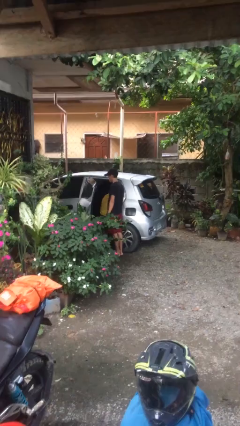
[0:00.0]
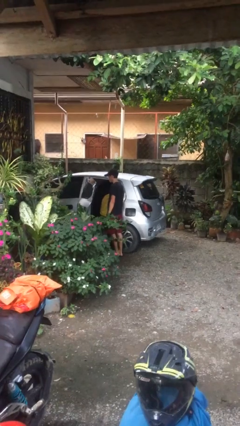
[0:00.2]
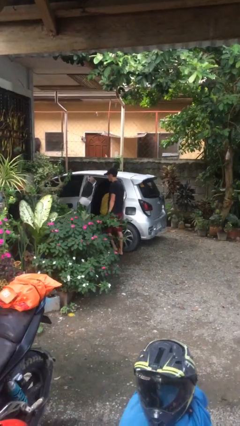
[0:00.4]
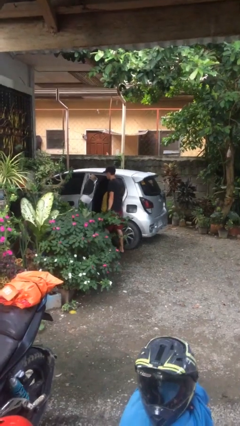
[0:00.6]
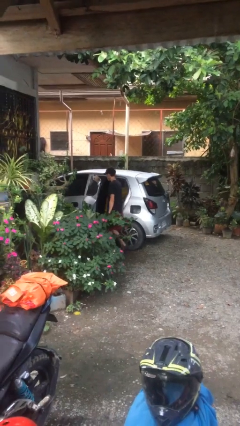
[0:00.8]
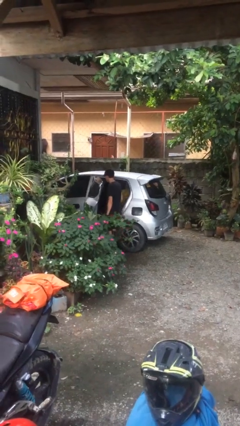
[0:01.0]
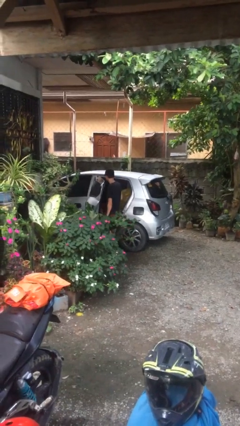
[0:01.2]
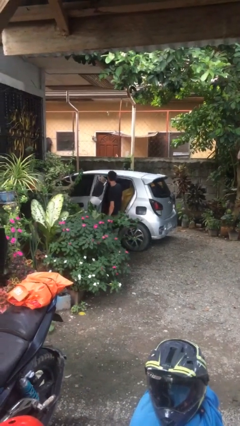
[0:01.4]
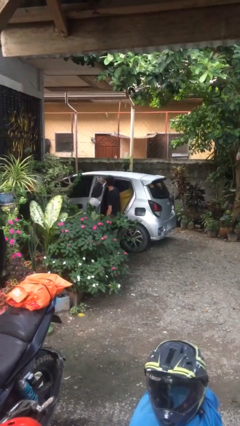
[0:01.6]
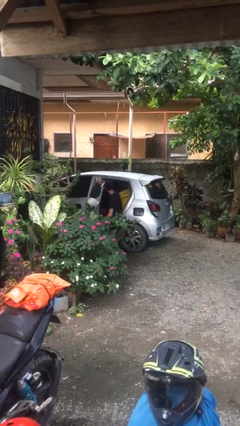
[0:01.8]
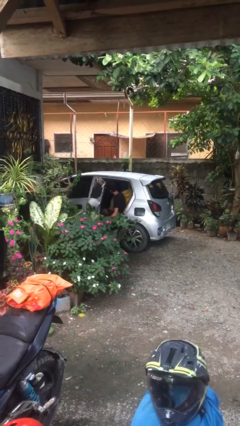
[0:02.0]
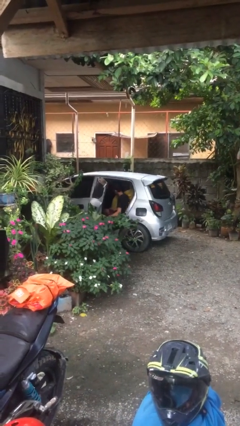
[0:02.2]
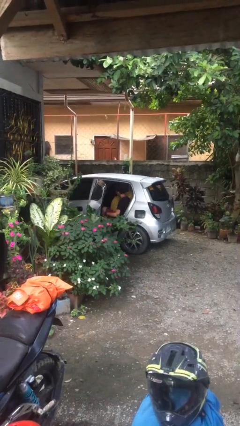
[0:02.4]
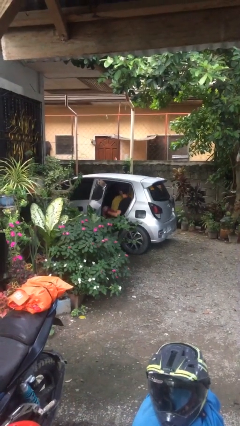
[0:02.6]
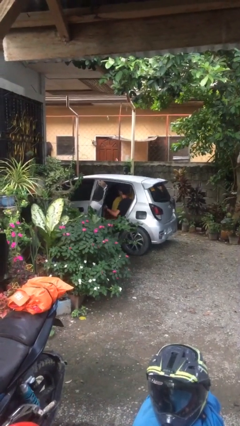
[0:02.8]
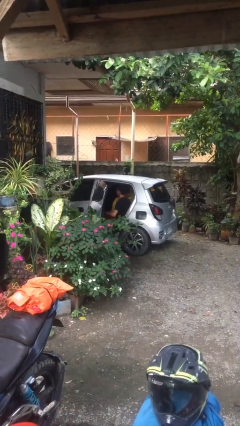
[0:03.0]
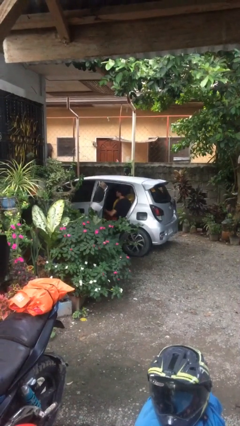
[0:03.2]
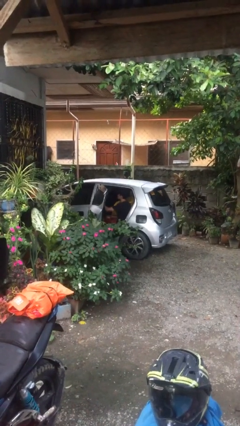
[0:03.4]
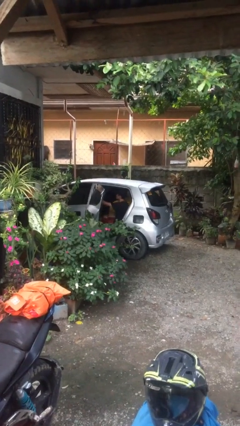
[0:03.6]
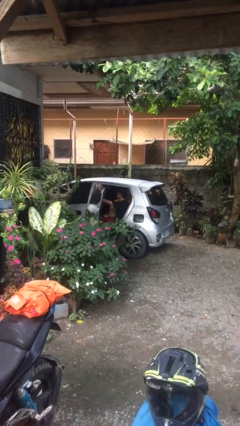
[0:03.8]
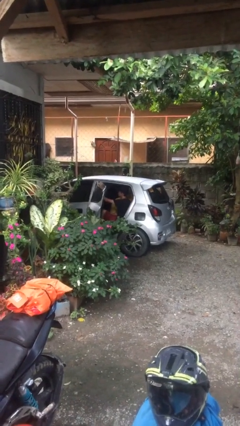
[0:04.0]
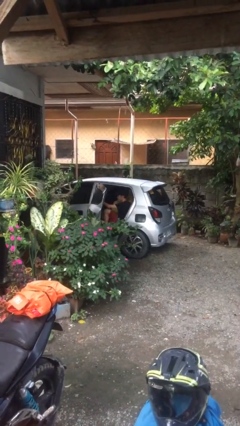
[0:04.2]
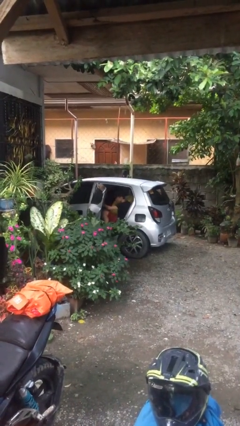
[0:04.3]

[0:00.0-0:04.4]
person enters car

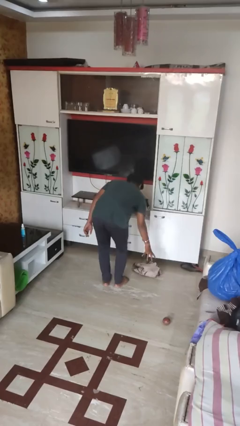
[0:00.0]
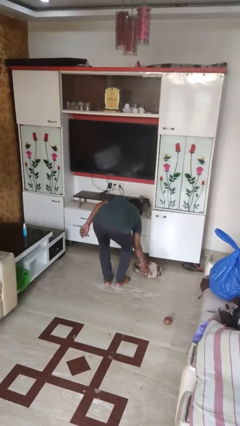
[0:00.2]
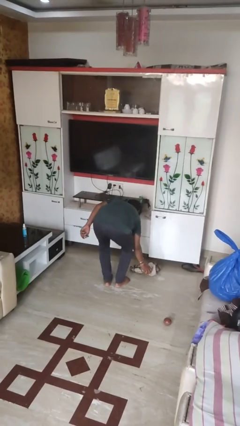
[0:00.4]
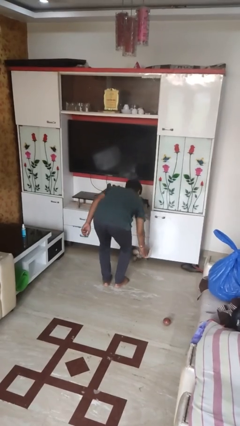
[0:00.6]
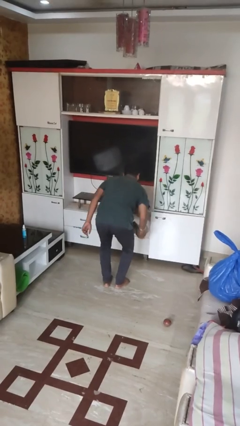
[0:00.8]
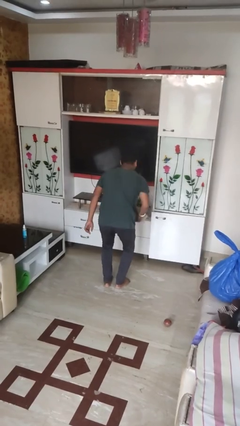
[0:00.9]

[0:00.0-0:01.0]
person picks up object from floor

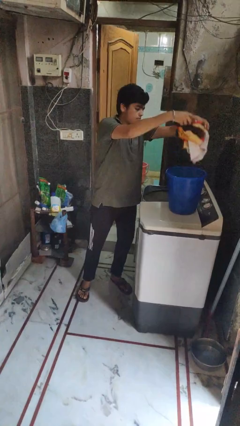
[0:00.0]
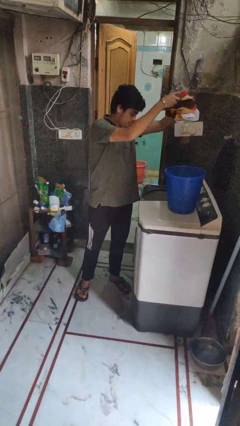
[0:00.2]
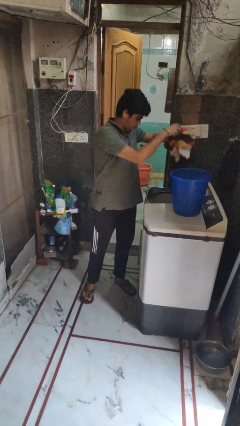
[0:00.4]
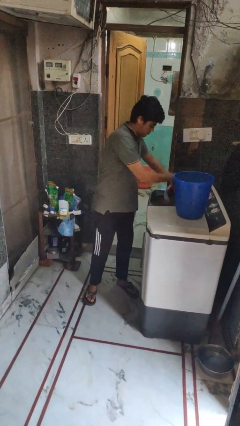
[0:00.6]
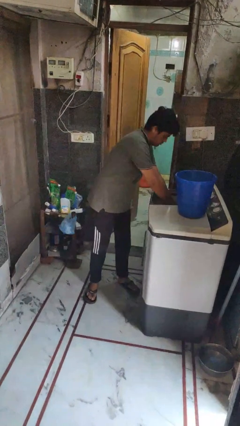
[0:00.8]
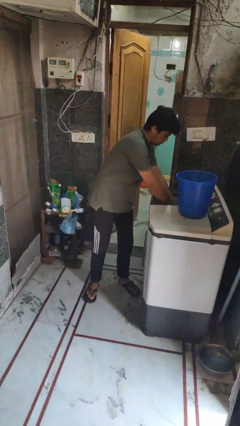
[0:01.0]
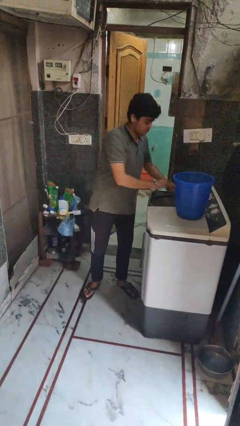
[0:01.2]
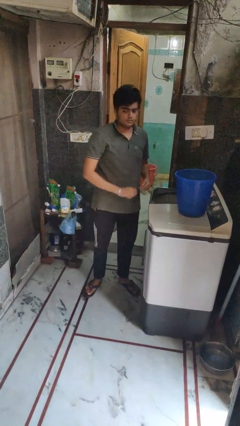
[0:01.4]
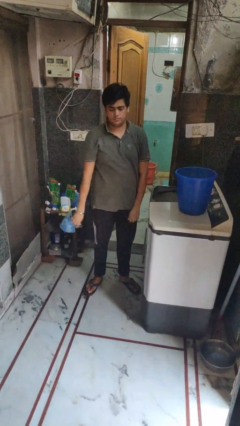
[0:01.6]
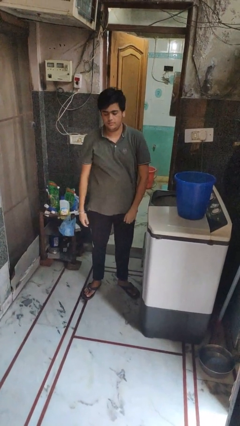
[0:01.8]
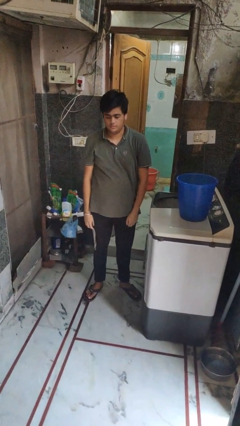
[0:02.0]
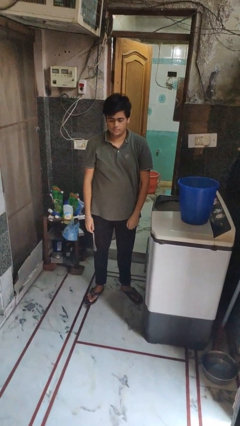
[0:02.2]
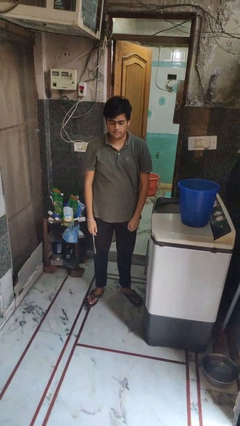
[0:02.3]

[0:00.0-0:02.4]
person loads clotheswasher

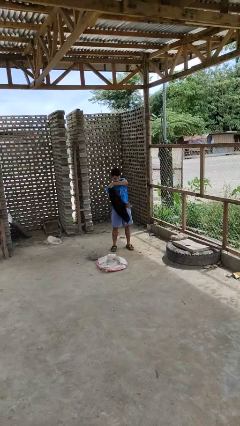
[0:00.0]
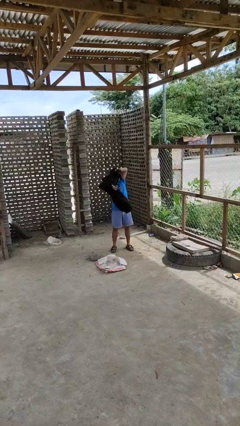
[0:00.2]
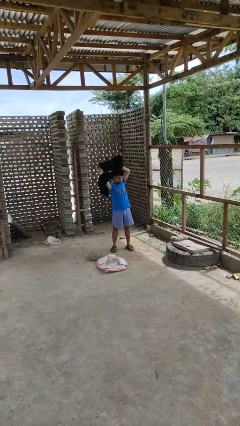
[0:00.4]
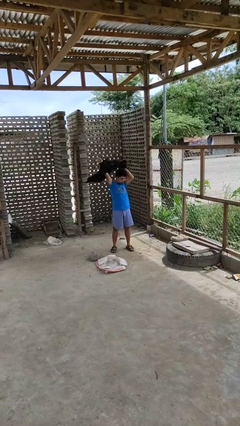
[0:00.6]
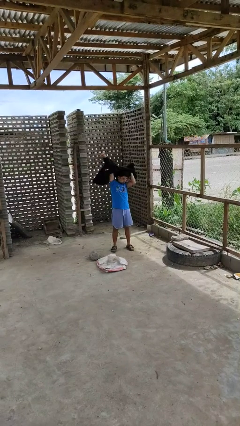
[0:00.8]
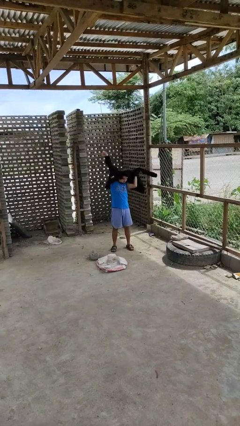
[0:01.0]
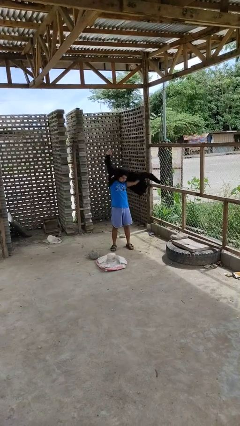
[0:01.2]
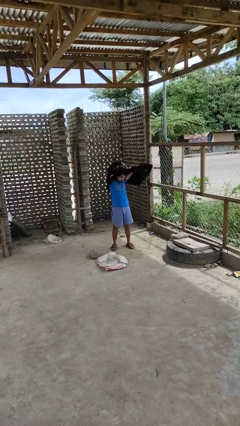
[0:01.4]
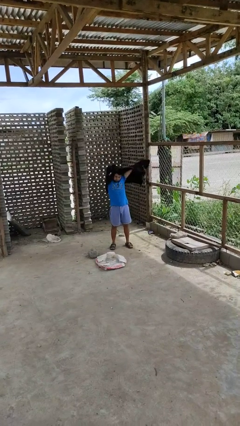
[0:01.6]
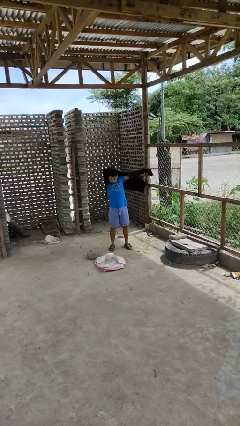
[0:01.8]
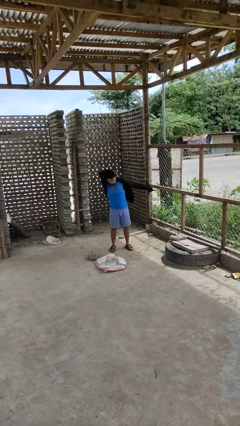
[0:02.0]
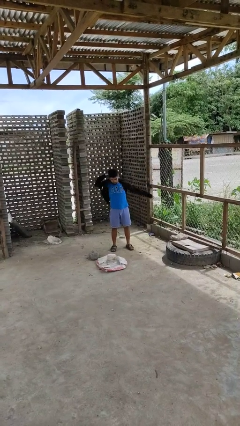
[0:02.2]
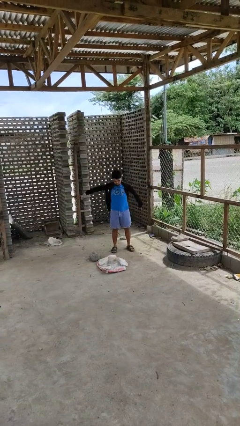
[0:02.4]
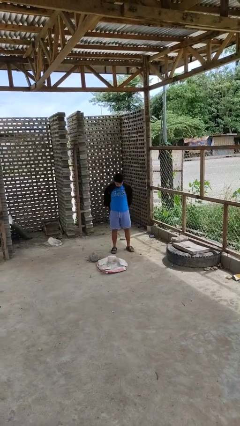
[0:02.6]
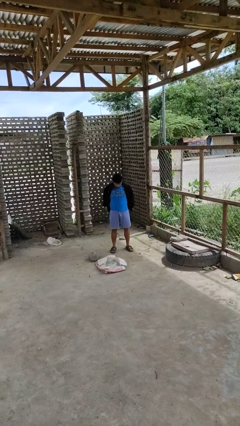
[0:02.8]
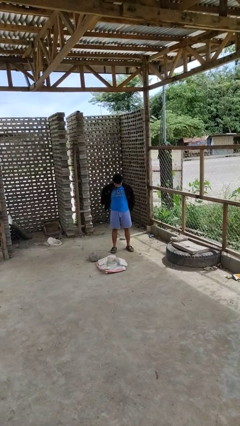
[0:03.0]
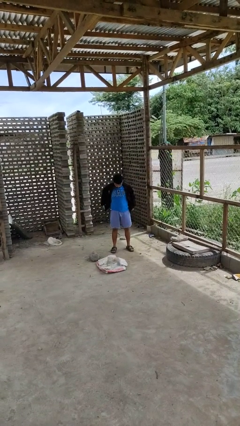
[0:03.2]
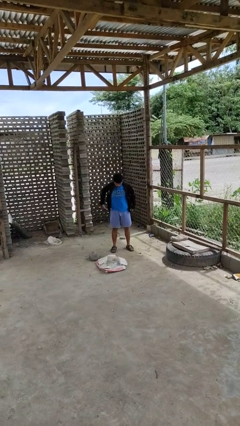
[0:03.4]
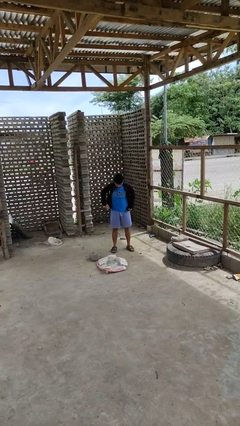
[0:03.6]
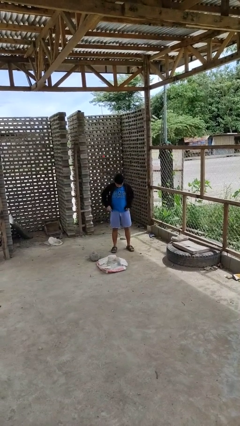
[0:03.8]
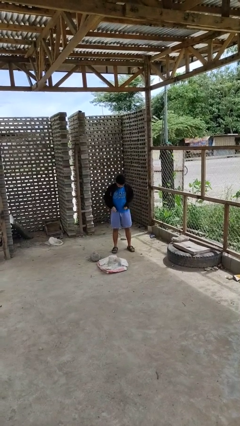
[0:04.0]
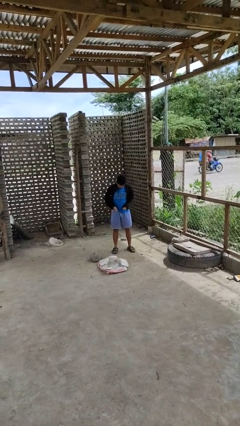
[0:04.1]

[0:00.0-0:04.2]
person puts on jacket

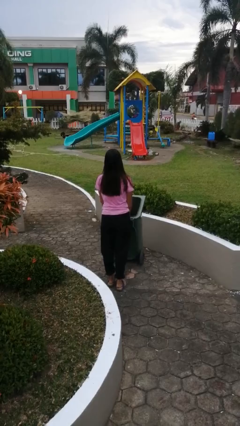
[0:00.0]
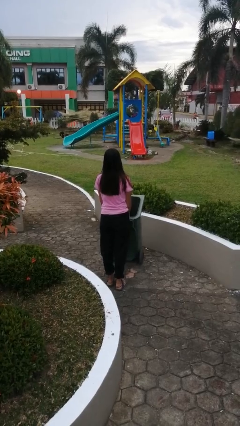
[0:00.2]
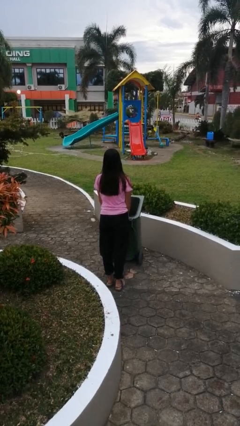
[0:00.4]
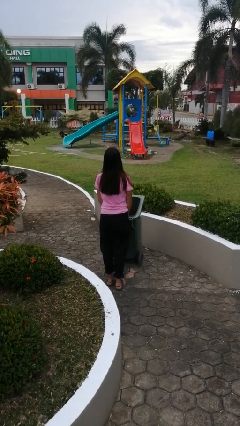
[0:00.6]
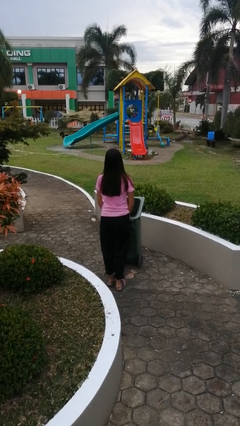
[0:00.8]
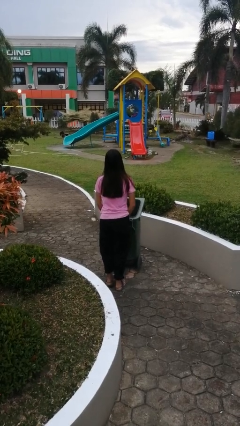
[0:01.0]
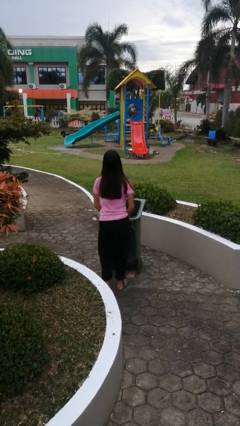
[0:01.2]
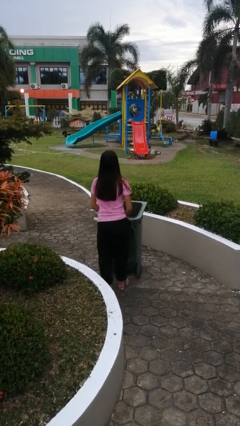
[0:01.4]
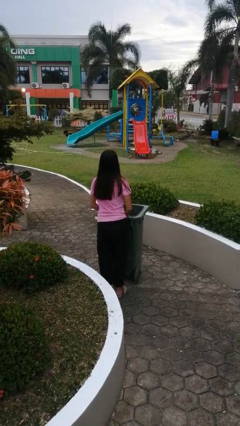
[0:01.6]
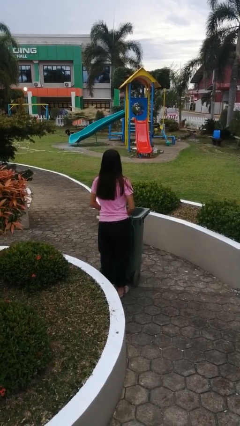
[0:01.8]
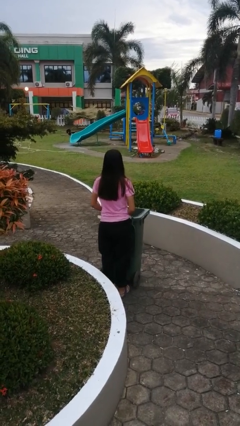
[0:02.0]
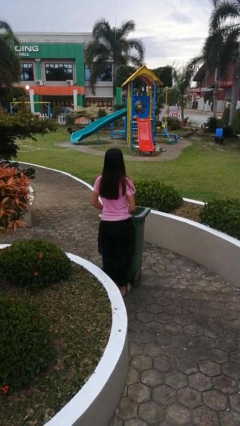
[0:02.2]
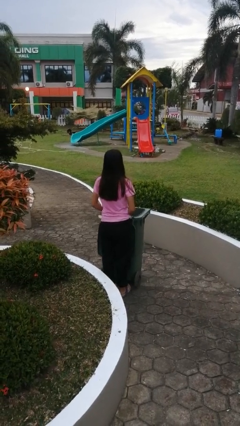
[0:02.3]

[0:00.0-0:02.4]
person pulls wheeled trashcan

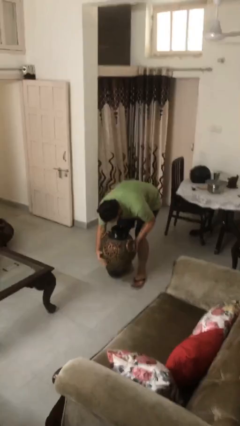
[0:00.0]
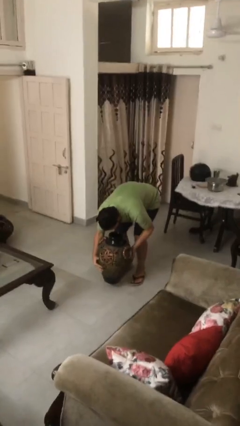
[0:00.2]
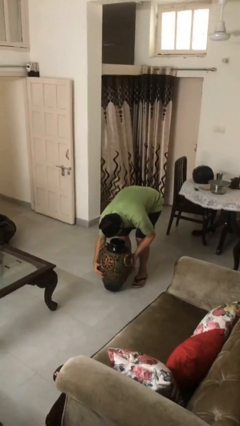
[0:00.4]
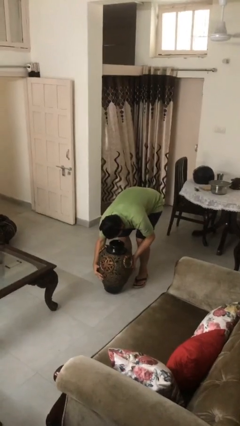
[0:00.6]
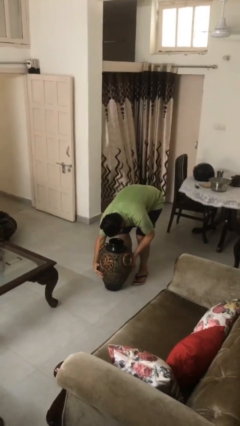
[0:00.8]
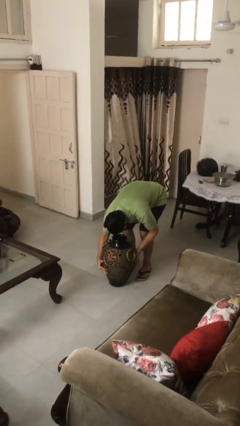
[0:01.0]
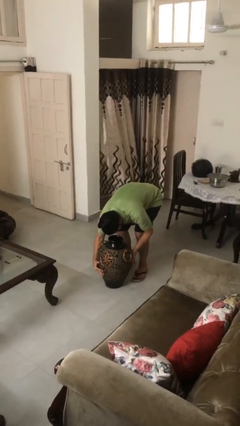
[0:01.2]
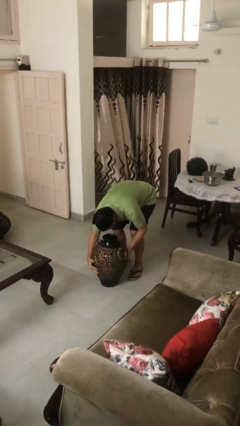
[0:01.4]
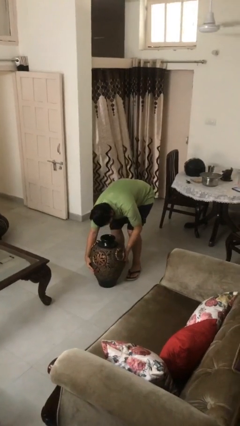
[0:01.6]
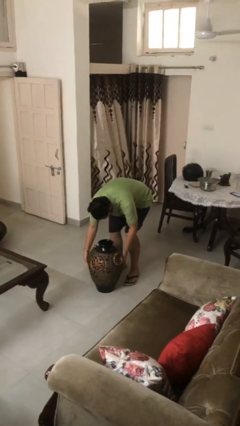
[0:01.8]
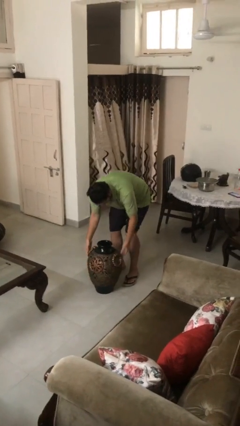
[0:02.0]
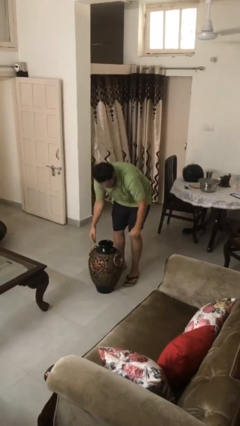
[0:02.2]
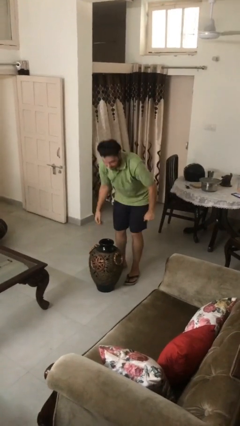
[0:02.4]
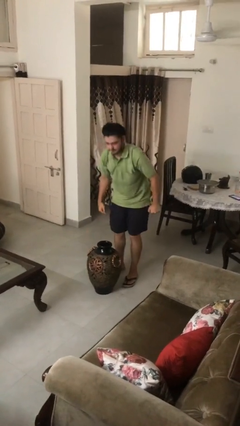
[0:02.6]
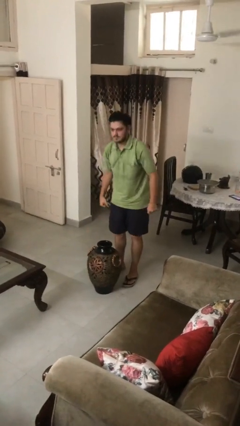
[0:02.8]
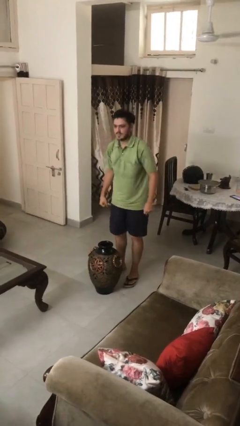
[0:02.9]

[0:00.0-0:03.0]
person puts down object on floor
